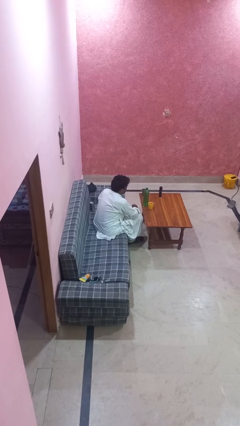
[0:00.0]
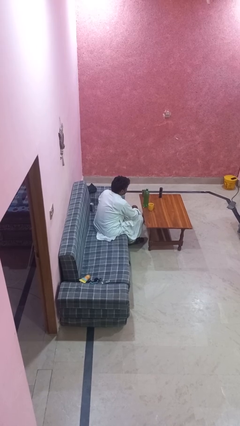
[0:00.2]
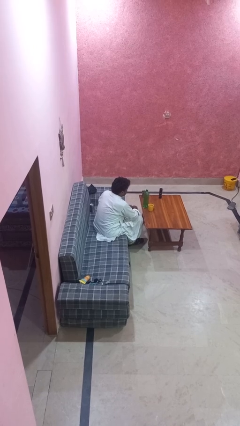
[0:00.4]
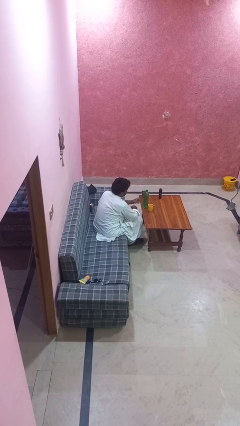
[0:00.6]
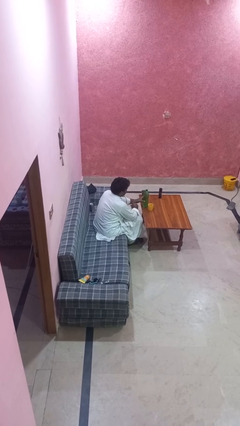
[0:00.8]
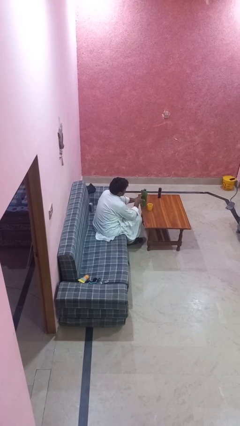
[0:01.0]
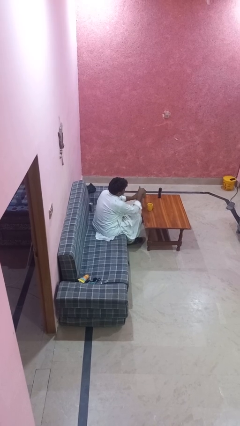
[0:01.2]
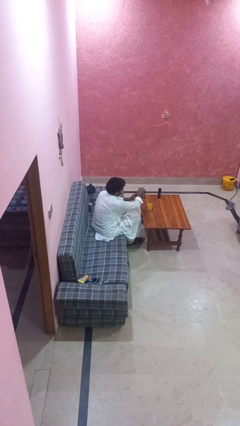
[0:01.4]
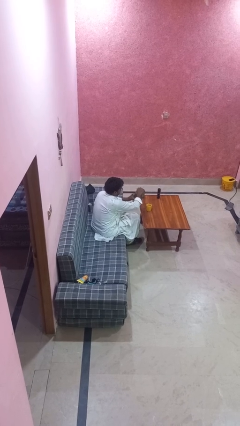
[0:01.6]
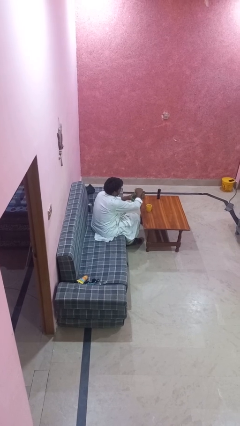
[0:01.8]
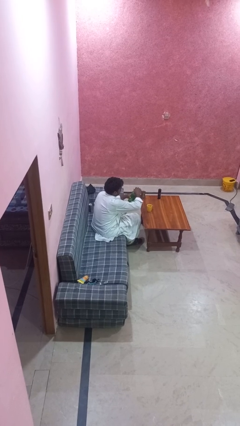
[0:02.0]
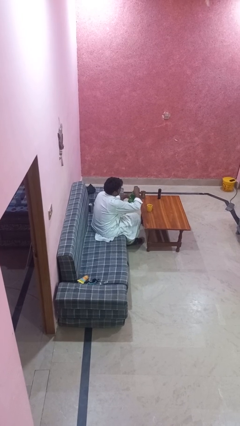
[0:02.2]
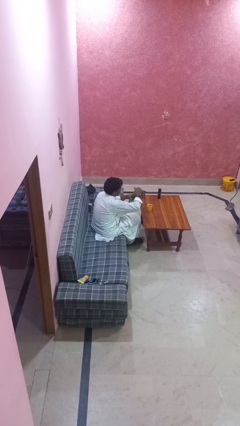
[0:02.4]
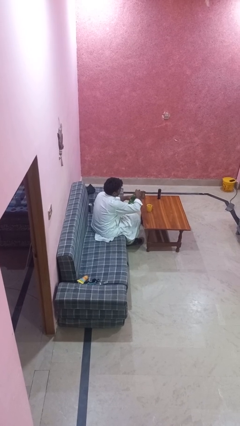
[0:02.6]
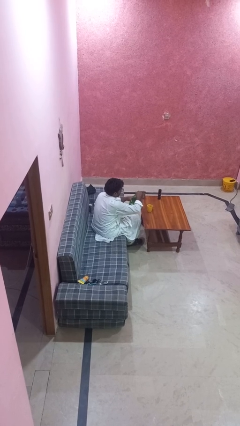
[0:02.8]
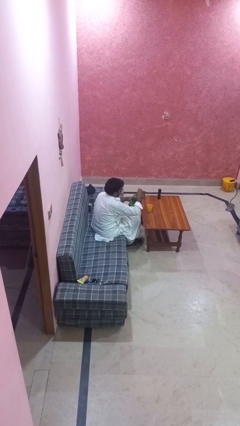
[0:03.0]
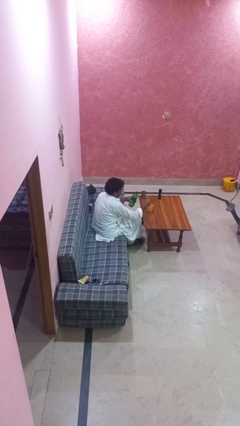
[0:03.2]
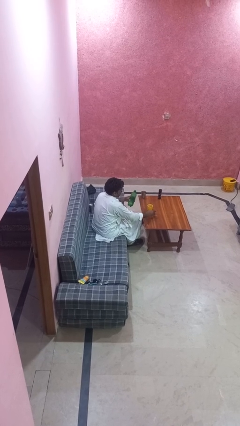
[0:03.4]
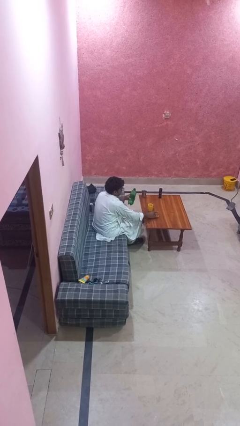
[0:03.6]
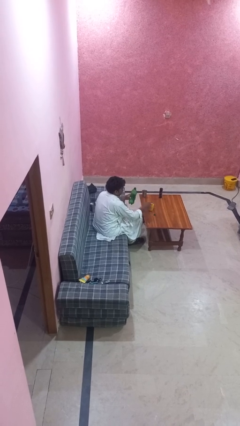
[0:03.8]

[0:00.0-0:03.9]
person unscrews lid from bottle

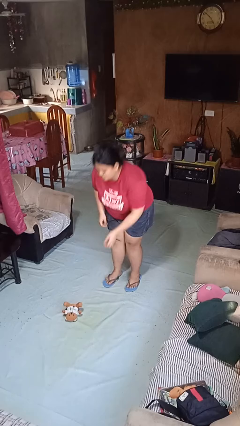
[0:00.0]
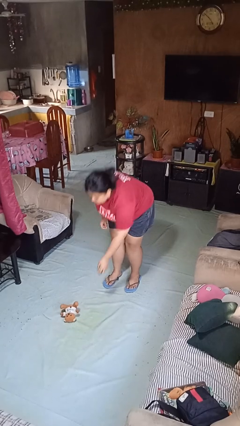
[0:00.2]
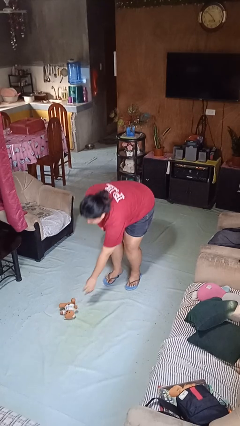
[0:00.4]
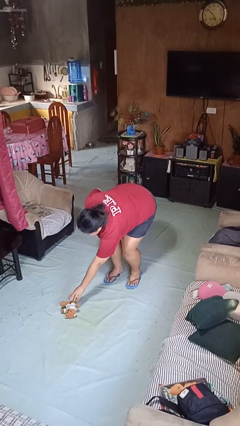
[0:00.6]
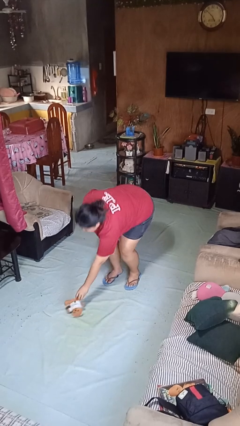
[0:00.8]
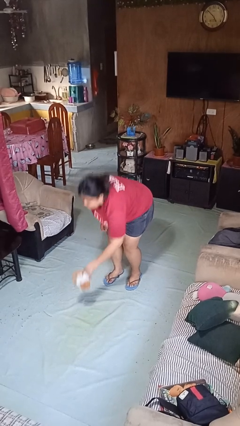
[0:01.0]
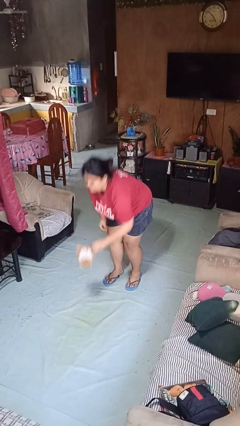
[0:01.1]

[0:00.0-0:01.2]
person picks up object from floor

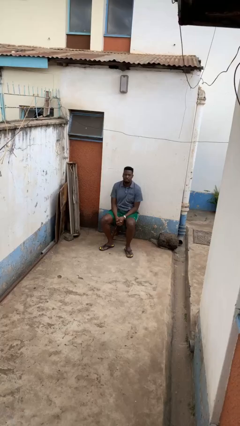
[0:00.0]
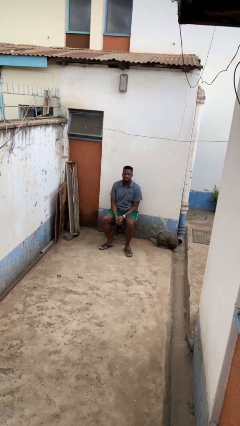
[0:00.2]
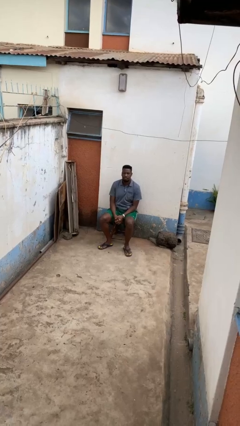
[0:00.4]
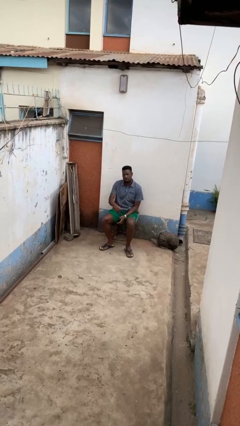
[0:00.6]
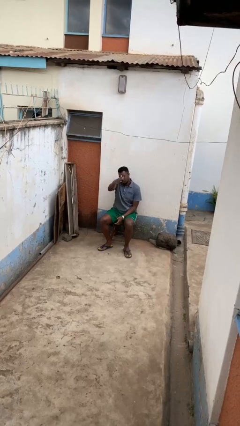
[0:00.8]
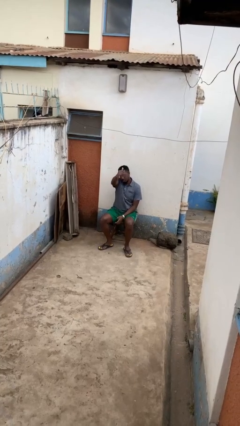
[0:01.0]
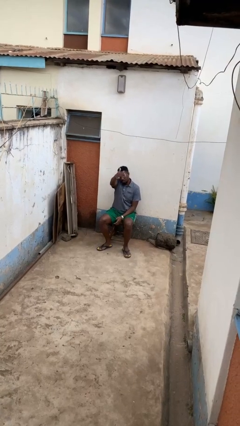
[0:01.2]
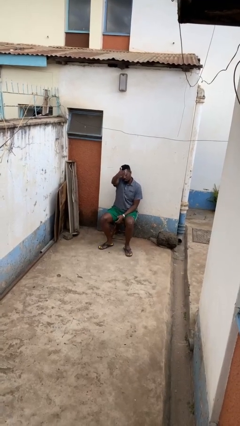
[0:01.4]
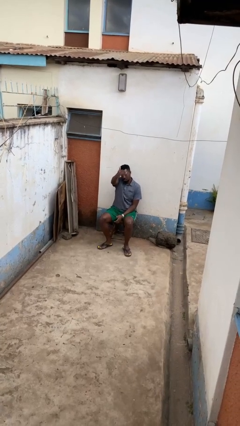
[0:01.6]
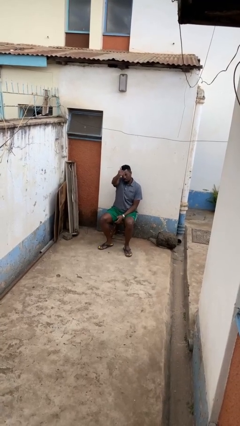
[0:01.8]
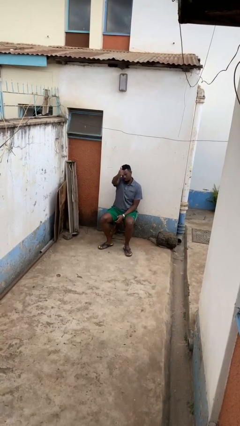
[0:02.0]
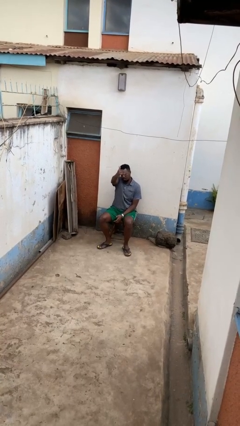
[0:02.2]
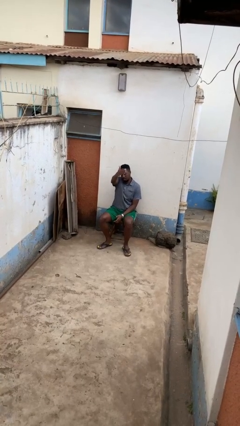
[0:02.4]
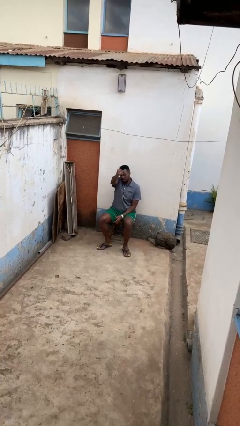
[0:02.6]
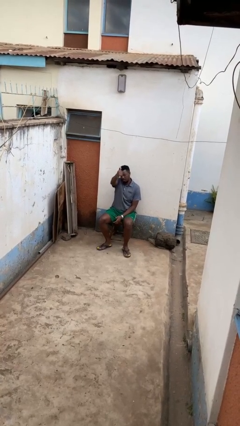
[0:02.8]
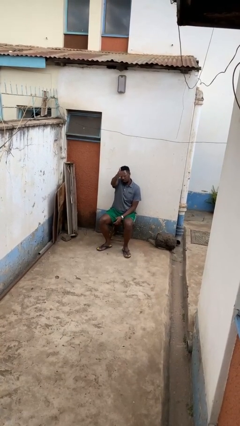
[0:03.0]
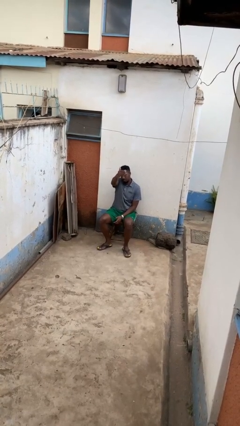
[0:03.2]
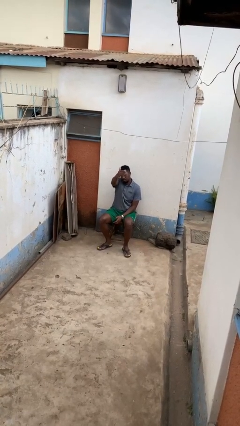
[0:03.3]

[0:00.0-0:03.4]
person gestures come here

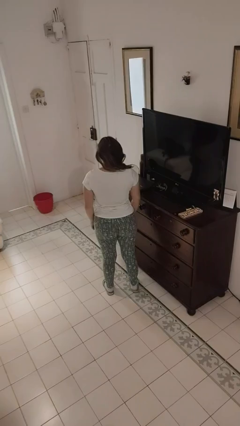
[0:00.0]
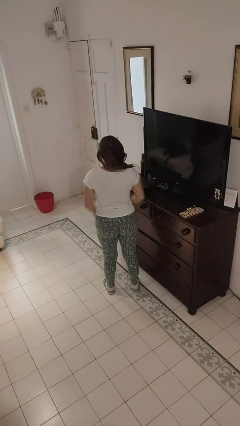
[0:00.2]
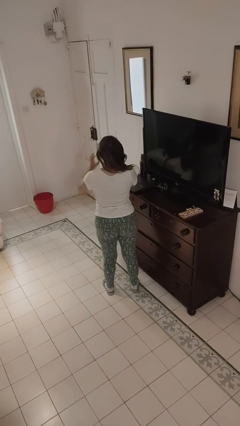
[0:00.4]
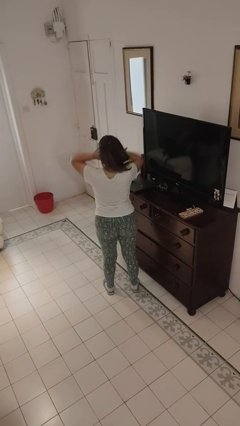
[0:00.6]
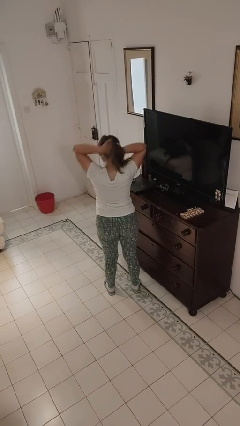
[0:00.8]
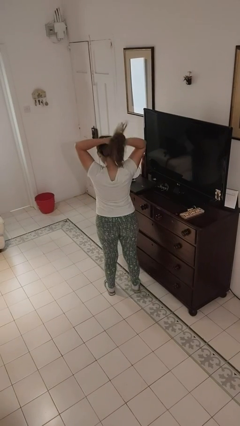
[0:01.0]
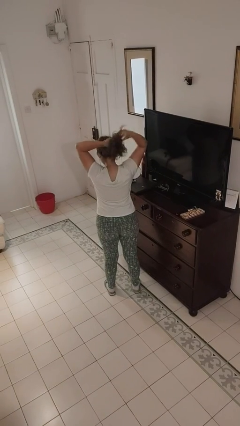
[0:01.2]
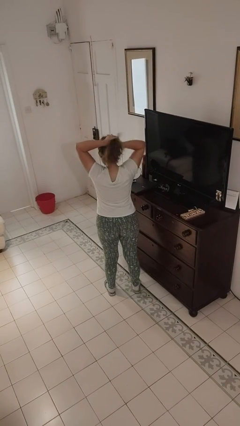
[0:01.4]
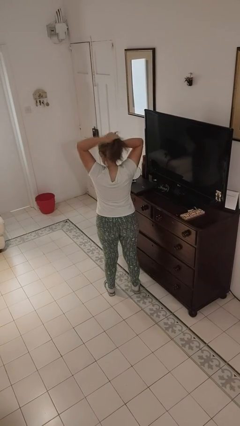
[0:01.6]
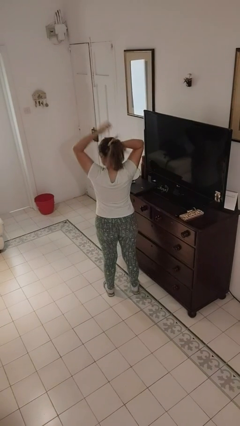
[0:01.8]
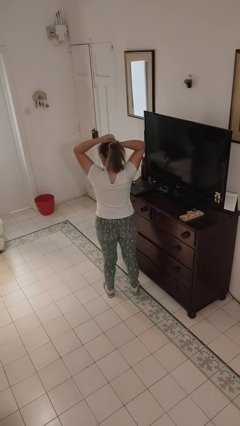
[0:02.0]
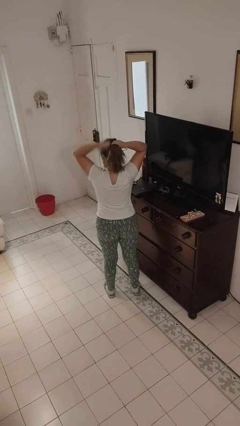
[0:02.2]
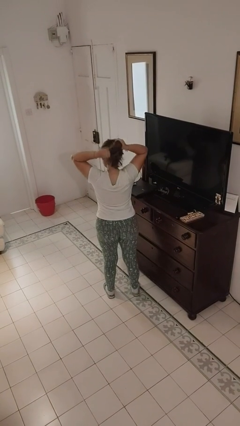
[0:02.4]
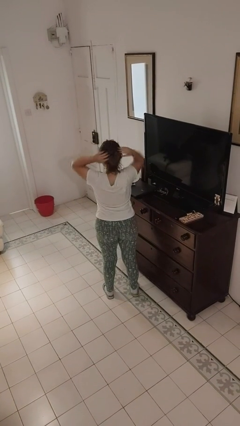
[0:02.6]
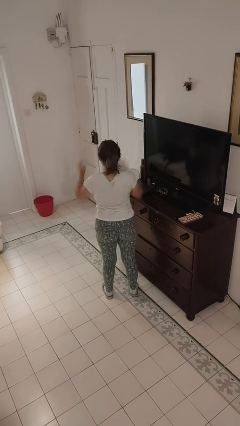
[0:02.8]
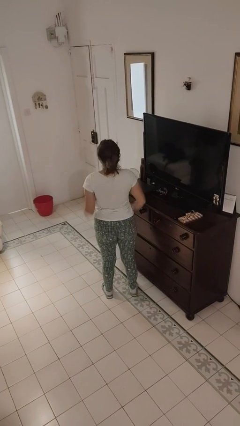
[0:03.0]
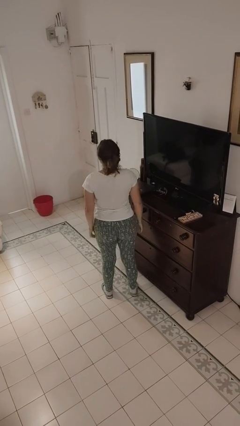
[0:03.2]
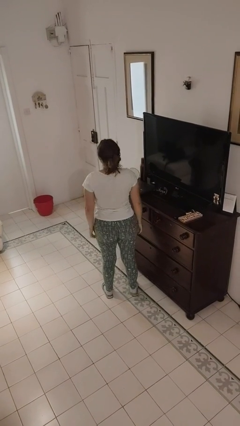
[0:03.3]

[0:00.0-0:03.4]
person puts hair in ponytail

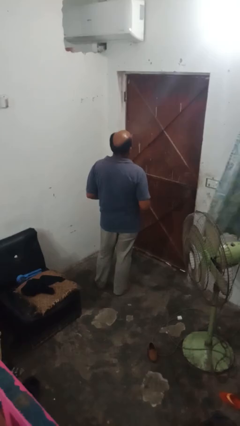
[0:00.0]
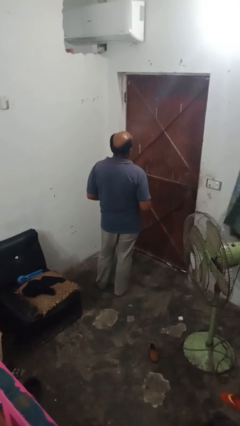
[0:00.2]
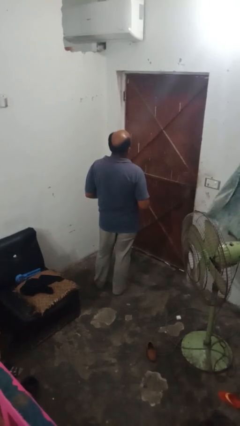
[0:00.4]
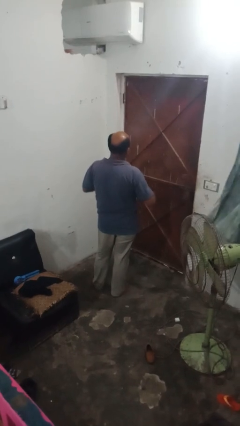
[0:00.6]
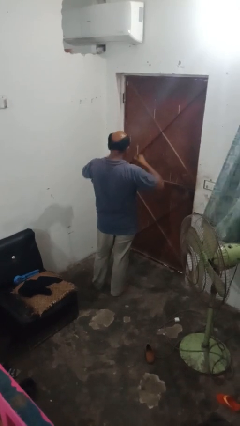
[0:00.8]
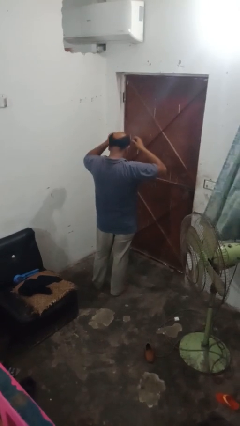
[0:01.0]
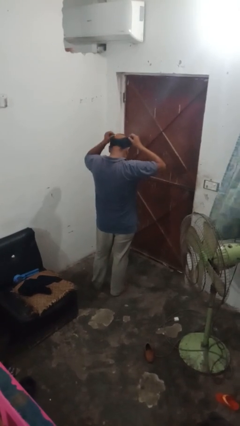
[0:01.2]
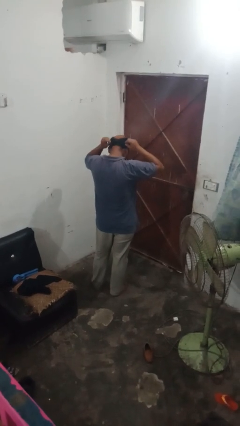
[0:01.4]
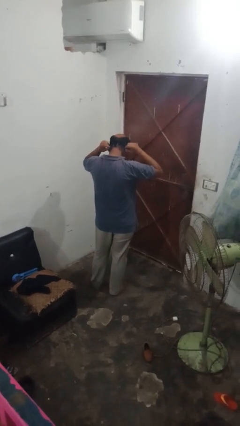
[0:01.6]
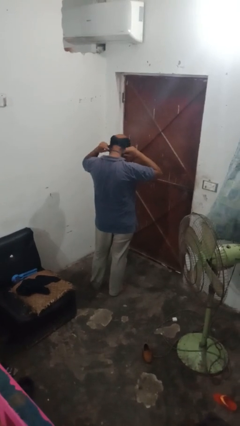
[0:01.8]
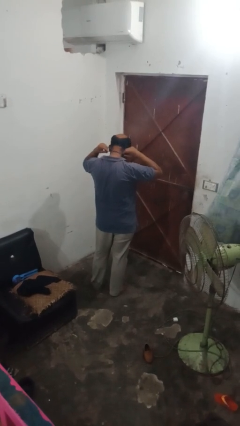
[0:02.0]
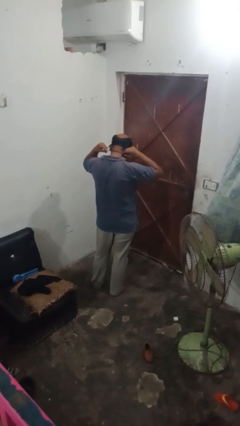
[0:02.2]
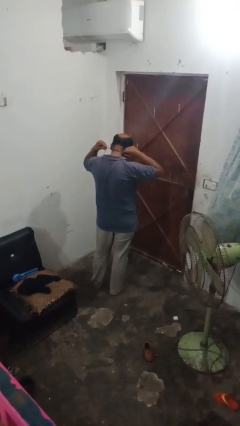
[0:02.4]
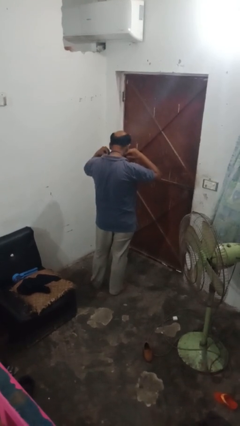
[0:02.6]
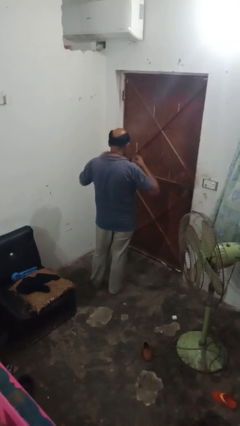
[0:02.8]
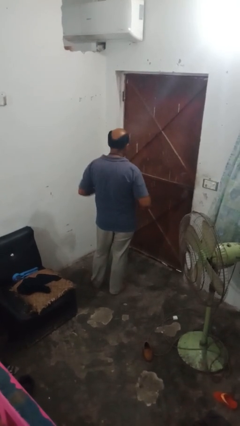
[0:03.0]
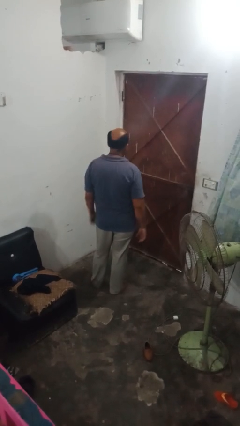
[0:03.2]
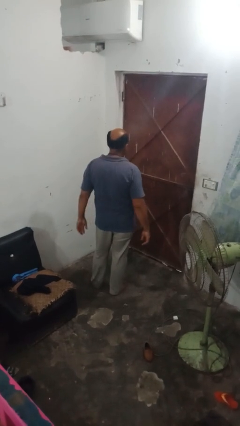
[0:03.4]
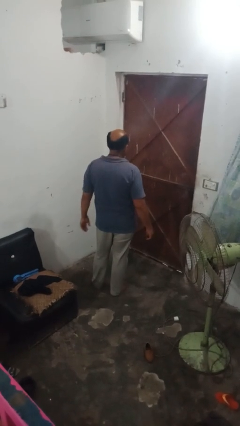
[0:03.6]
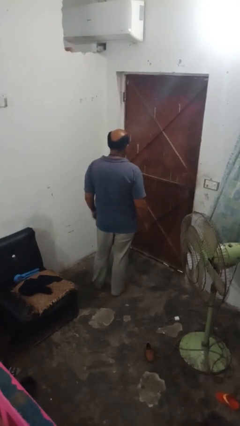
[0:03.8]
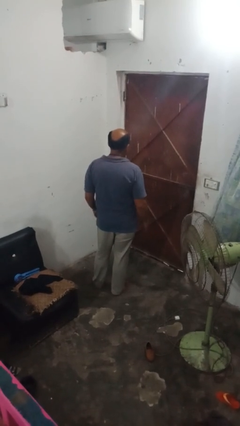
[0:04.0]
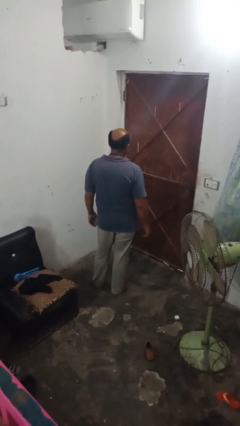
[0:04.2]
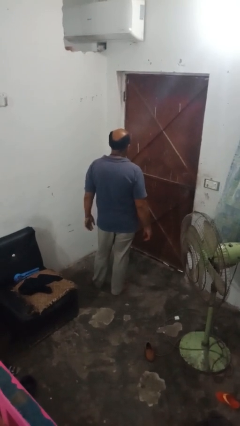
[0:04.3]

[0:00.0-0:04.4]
person puts on necklace

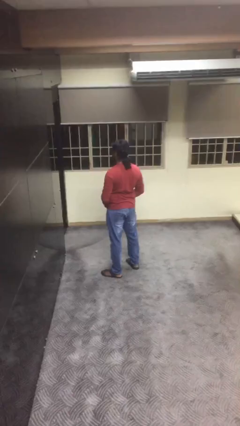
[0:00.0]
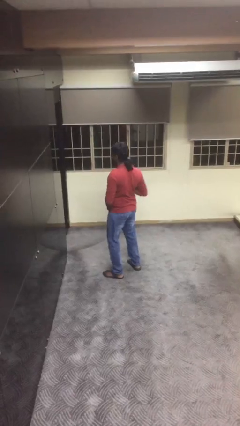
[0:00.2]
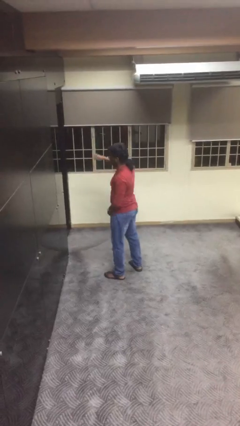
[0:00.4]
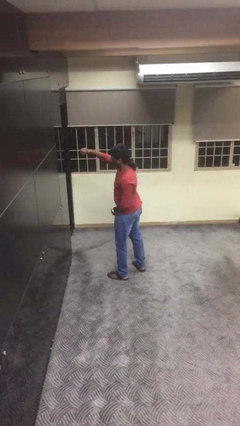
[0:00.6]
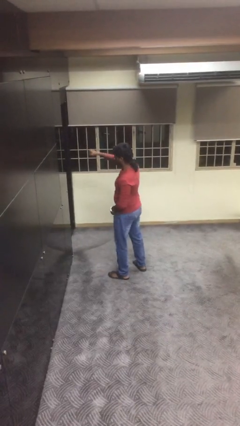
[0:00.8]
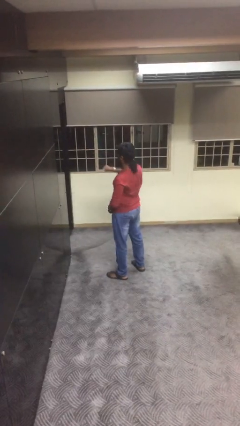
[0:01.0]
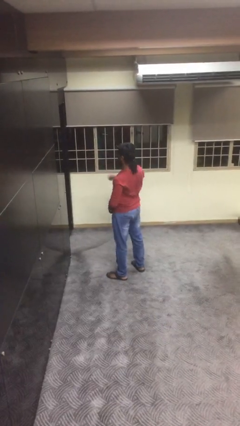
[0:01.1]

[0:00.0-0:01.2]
person punches
